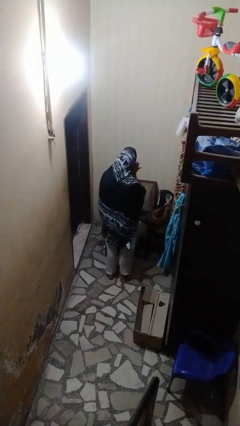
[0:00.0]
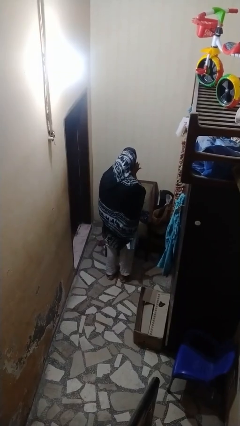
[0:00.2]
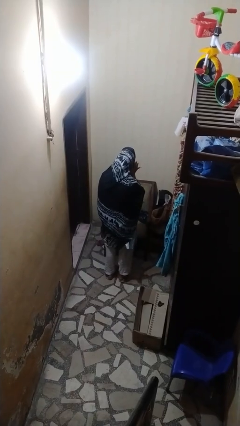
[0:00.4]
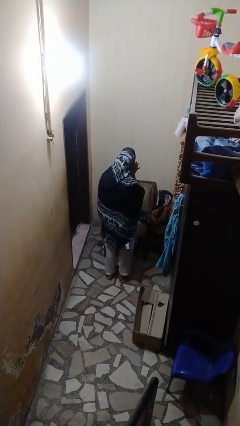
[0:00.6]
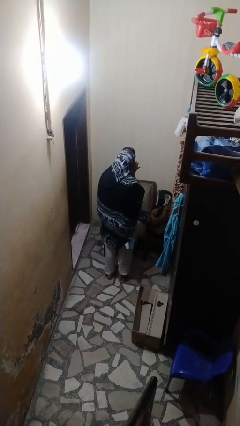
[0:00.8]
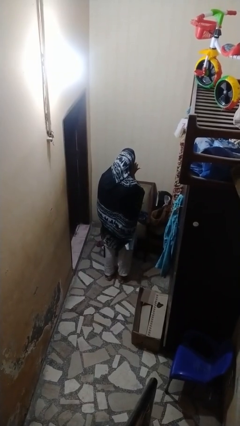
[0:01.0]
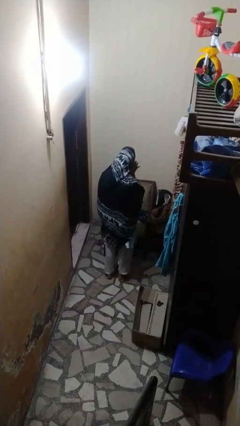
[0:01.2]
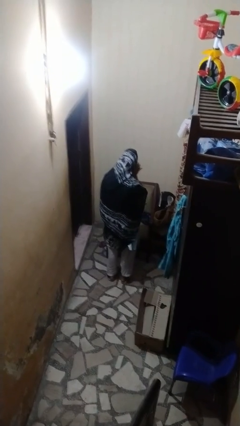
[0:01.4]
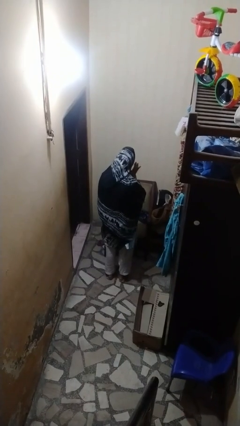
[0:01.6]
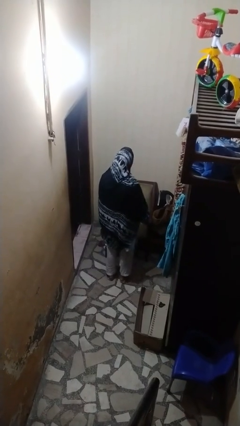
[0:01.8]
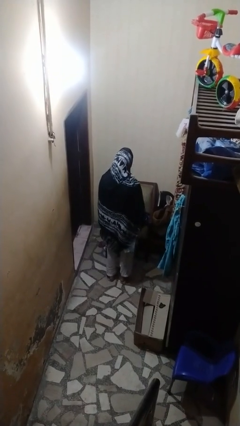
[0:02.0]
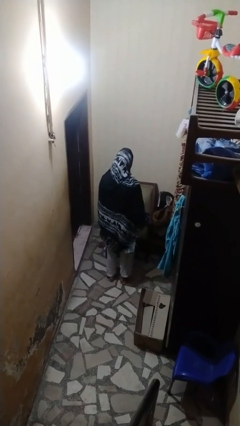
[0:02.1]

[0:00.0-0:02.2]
person gestures listen closely

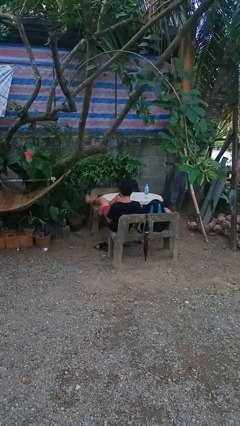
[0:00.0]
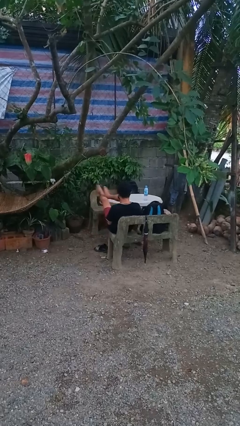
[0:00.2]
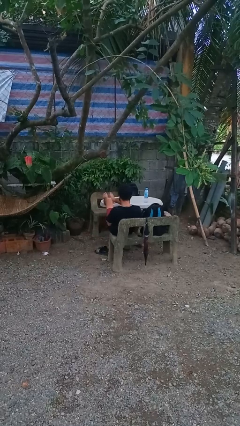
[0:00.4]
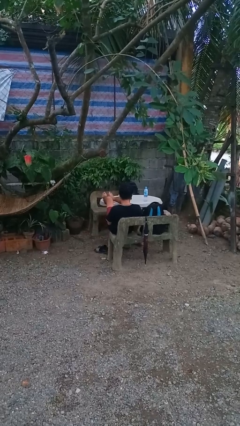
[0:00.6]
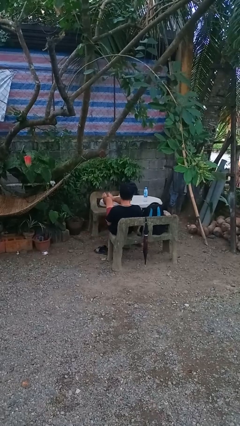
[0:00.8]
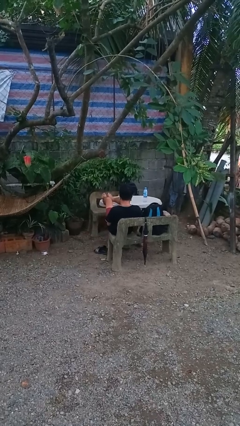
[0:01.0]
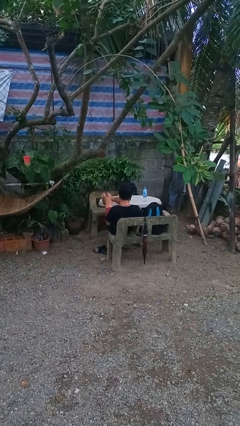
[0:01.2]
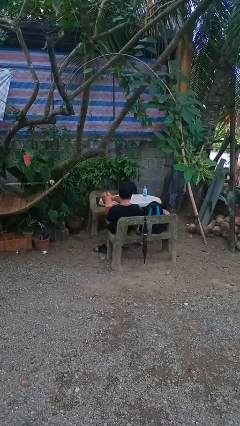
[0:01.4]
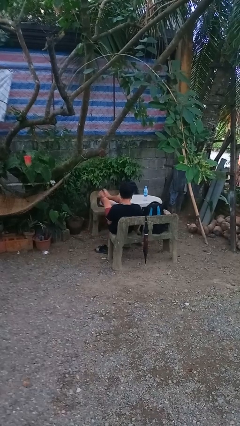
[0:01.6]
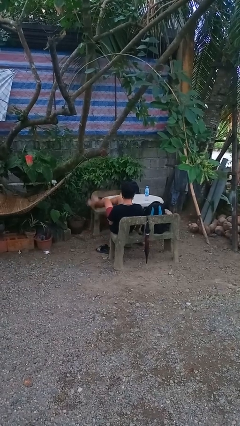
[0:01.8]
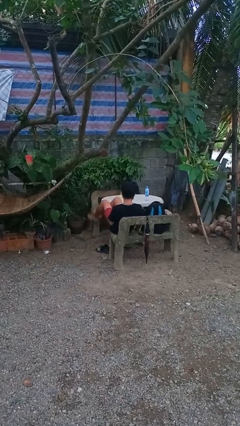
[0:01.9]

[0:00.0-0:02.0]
person puts feet up

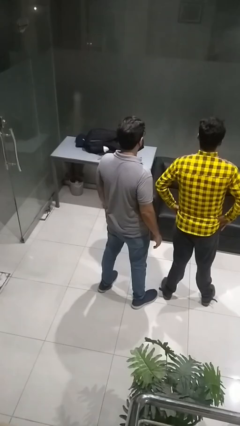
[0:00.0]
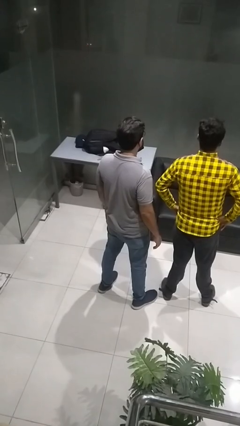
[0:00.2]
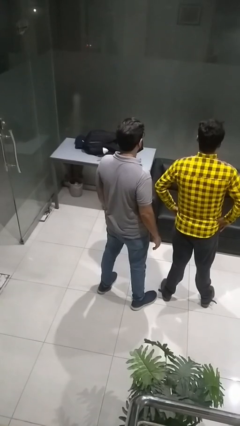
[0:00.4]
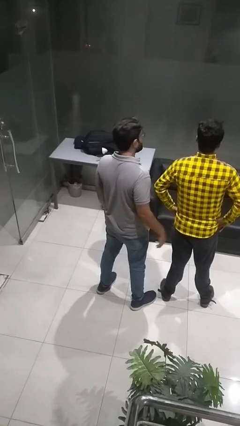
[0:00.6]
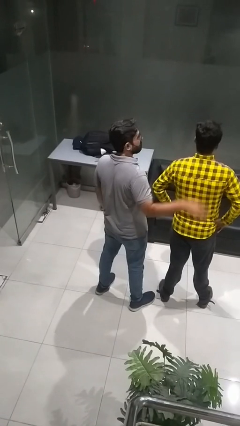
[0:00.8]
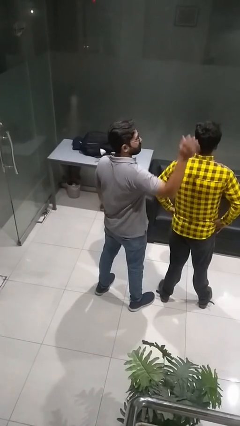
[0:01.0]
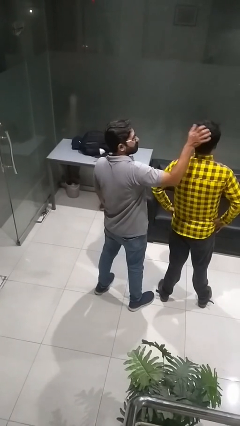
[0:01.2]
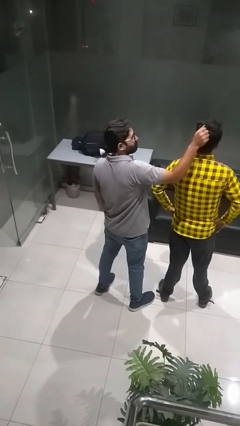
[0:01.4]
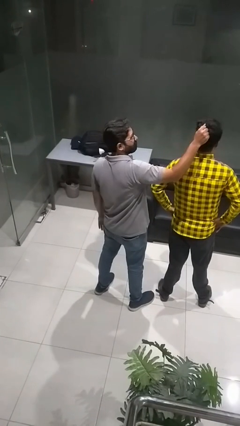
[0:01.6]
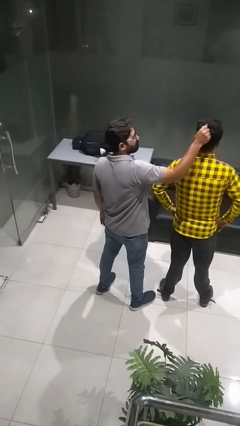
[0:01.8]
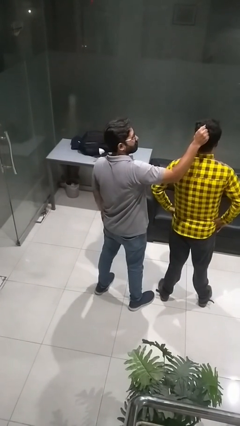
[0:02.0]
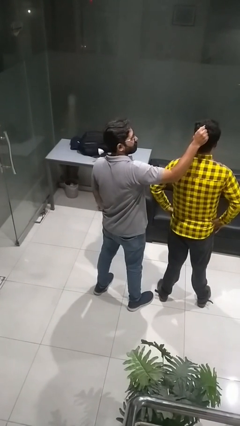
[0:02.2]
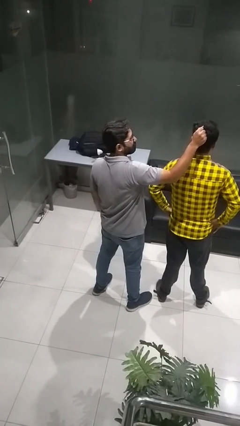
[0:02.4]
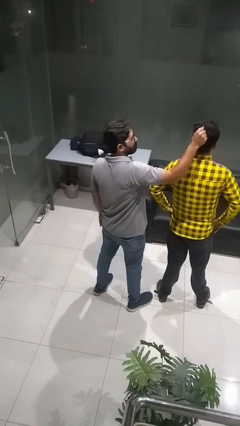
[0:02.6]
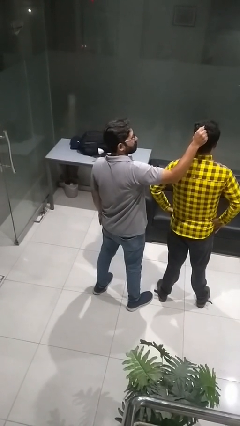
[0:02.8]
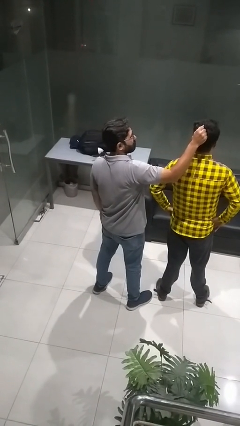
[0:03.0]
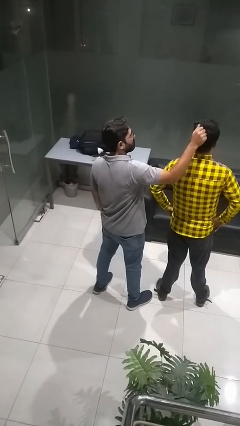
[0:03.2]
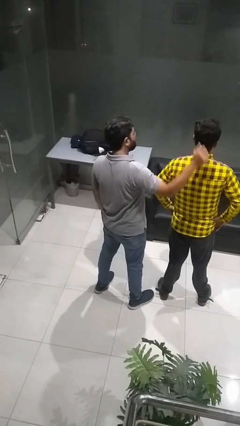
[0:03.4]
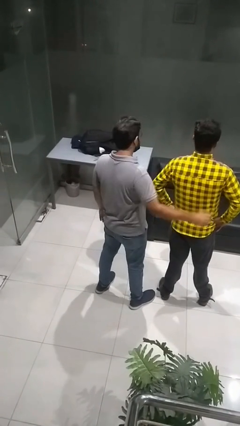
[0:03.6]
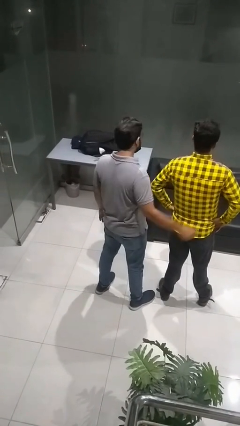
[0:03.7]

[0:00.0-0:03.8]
person grabs person by hair

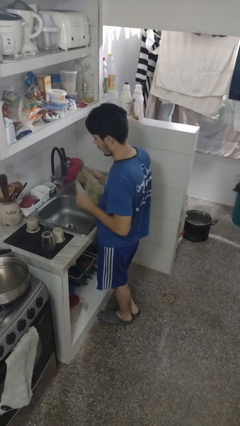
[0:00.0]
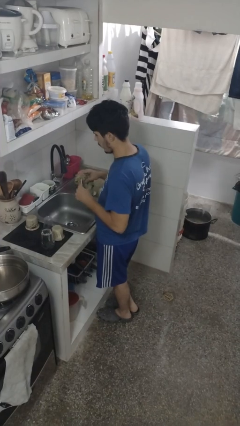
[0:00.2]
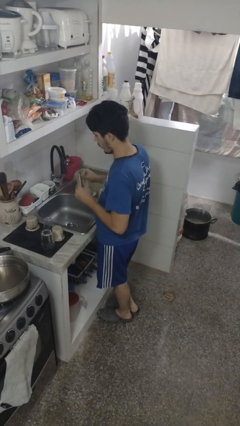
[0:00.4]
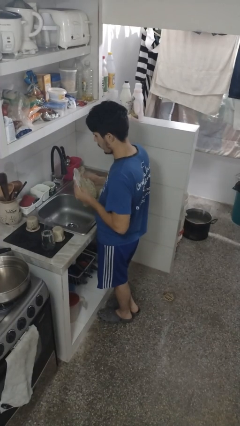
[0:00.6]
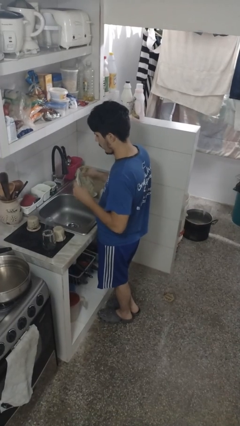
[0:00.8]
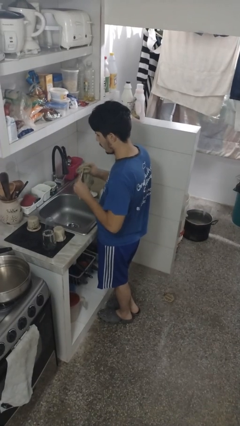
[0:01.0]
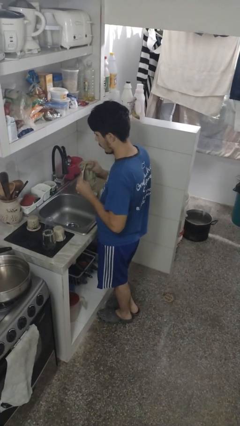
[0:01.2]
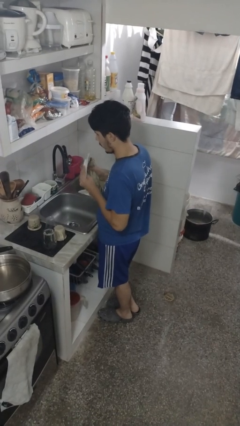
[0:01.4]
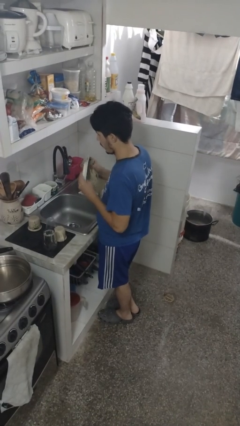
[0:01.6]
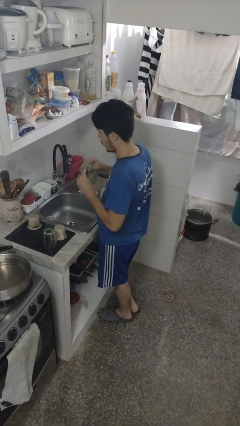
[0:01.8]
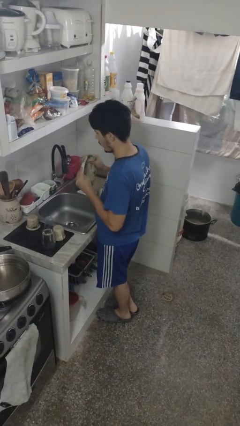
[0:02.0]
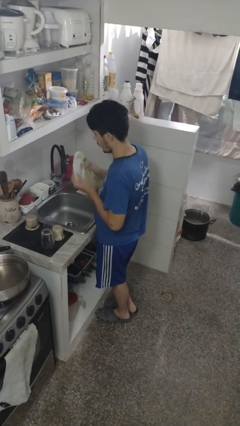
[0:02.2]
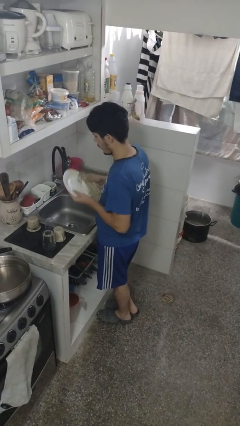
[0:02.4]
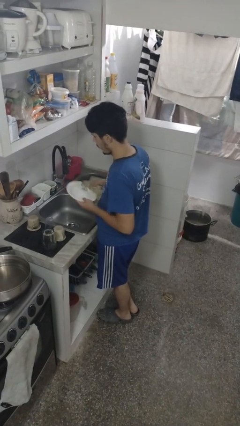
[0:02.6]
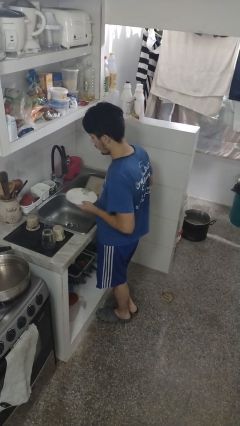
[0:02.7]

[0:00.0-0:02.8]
person dries dish

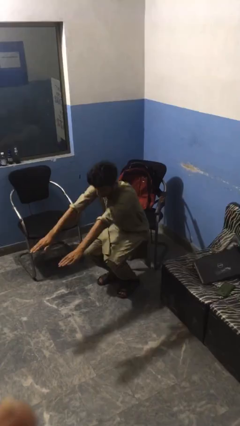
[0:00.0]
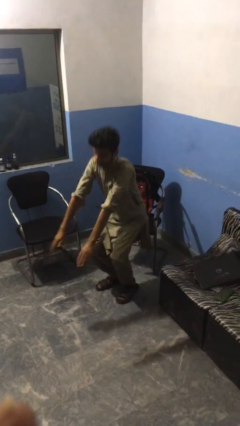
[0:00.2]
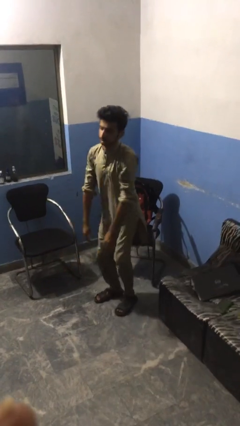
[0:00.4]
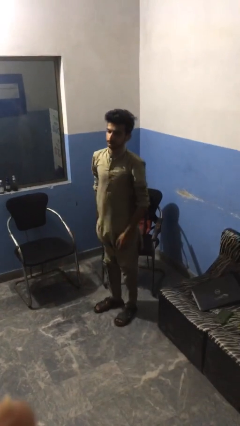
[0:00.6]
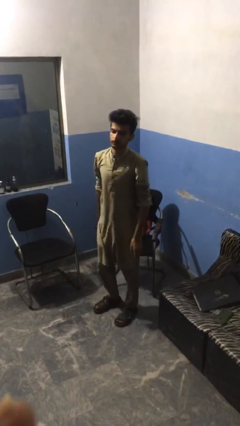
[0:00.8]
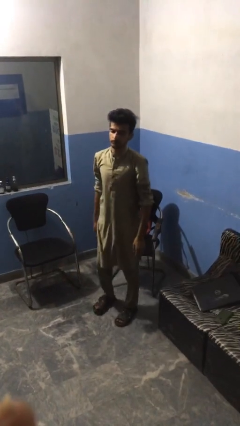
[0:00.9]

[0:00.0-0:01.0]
person stands up

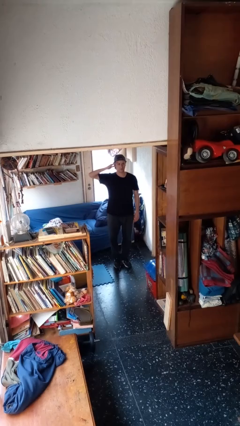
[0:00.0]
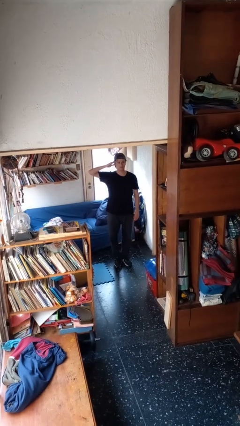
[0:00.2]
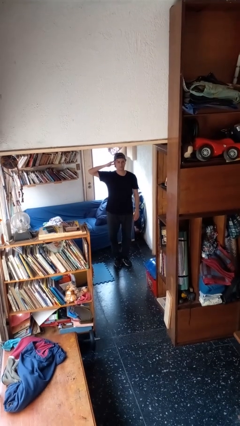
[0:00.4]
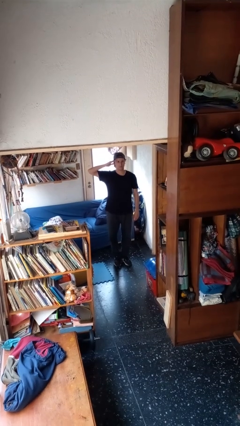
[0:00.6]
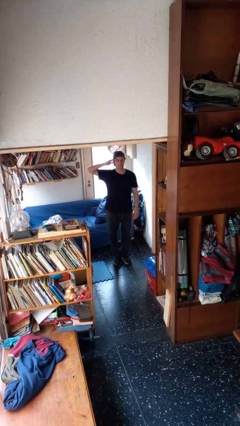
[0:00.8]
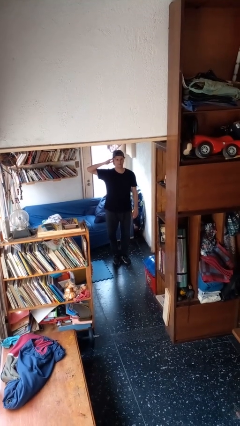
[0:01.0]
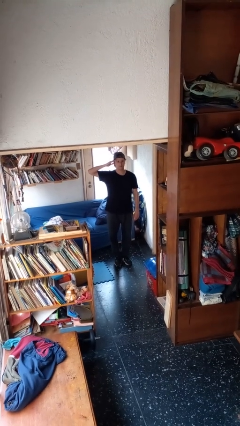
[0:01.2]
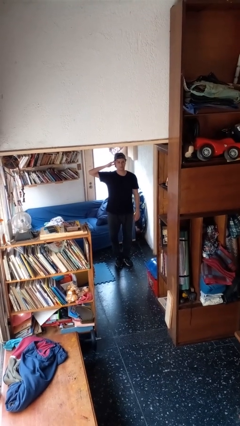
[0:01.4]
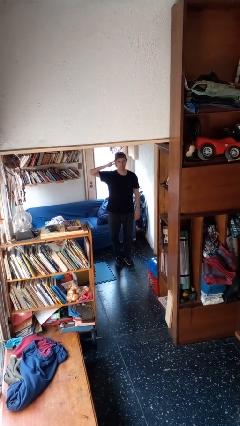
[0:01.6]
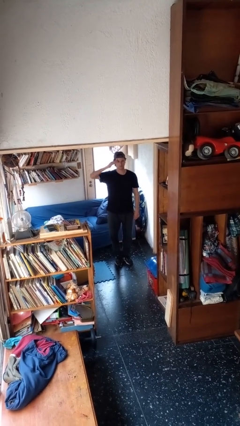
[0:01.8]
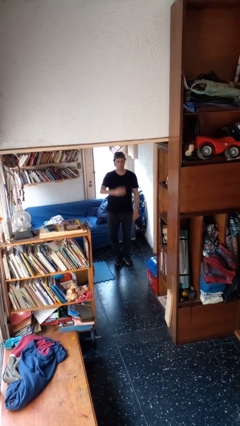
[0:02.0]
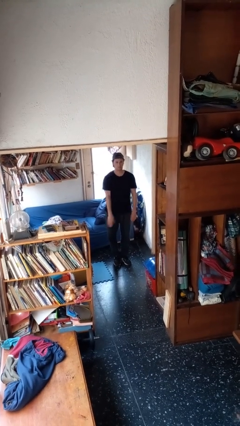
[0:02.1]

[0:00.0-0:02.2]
person salutes

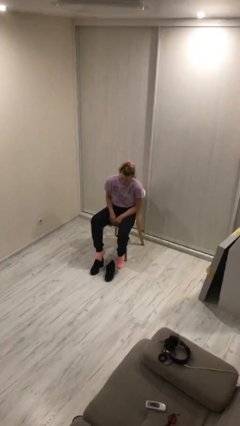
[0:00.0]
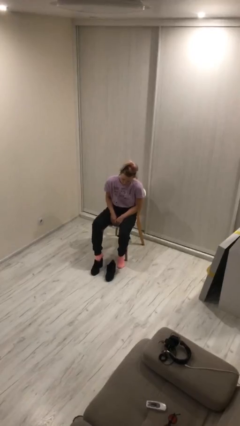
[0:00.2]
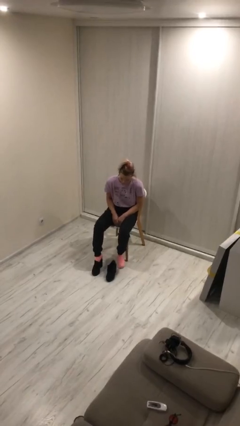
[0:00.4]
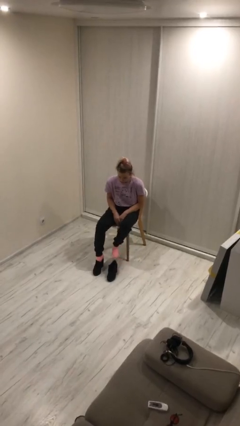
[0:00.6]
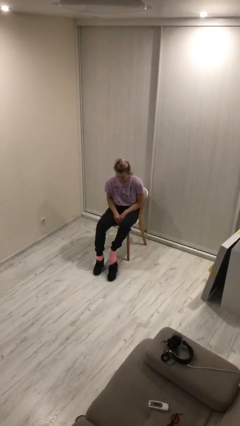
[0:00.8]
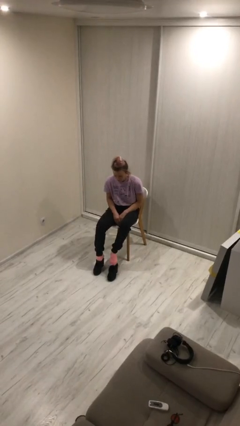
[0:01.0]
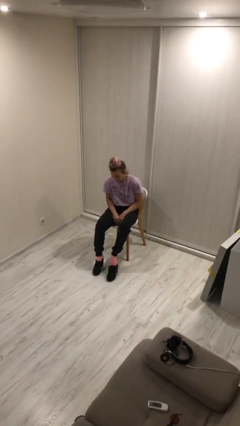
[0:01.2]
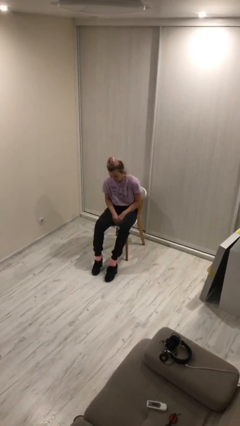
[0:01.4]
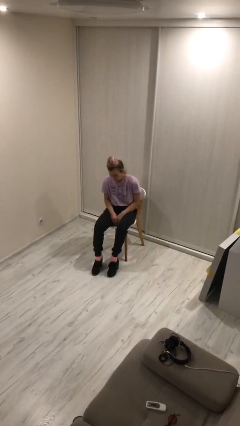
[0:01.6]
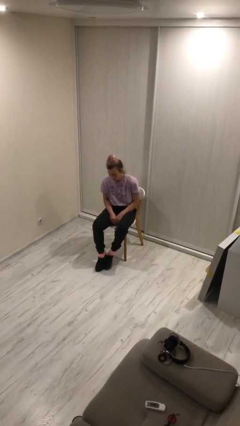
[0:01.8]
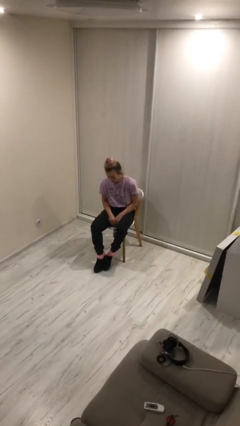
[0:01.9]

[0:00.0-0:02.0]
person puts on shoes

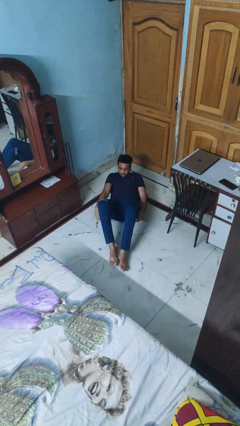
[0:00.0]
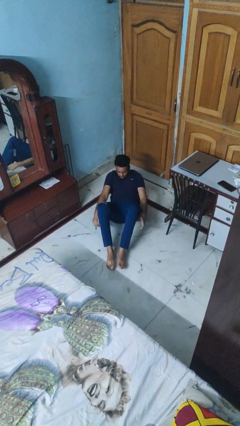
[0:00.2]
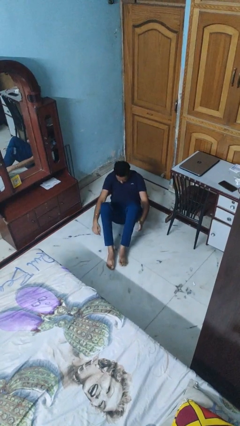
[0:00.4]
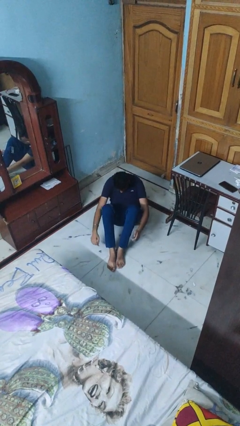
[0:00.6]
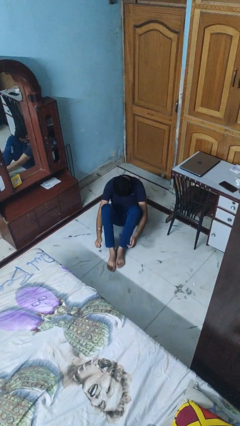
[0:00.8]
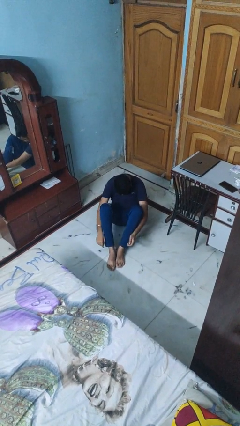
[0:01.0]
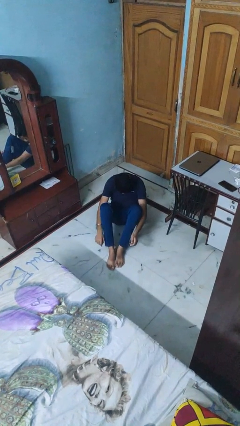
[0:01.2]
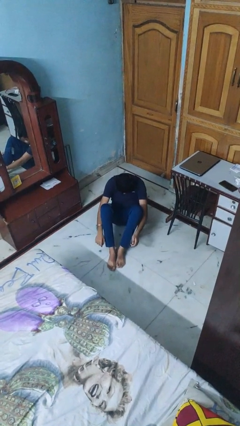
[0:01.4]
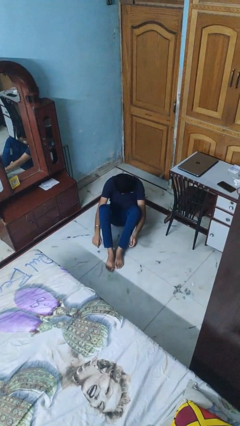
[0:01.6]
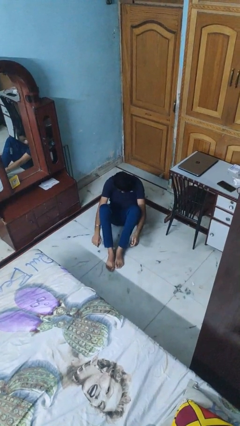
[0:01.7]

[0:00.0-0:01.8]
person exercises with situp
